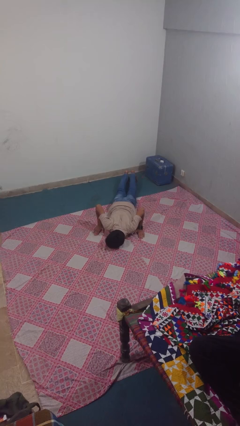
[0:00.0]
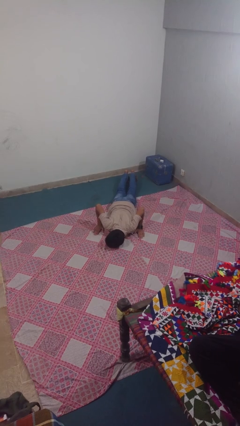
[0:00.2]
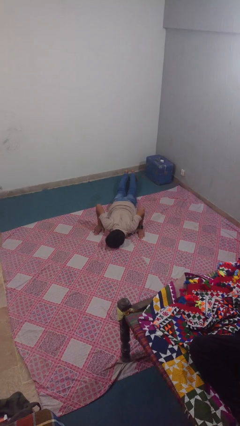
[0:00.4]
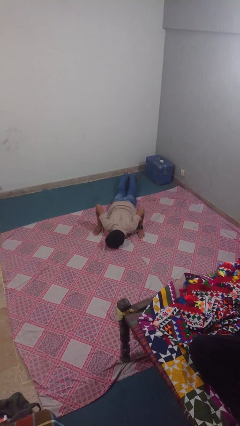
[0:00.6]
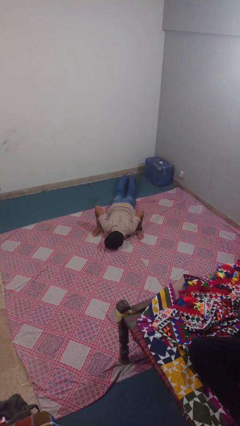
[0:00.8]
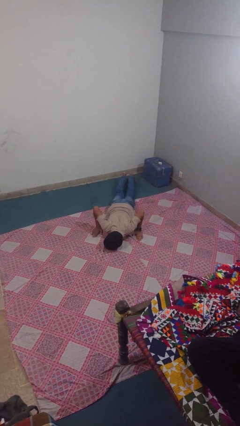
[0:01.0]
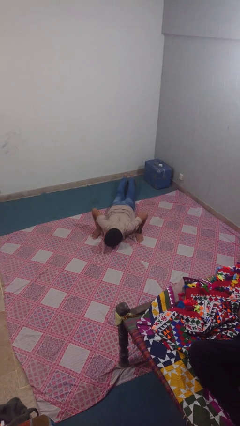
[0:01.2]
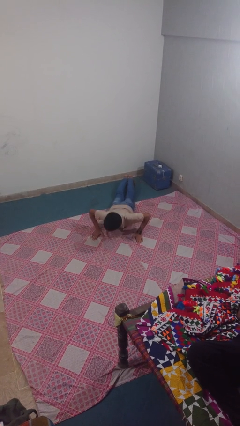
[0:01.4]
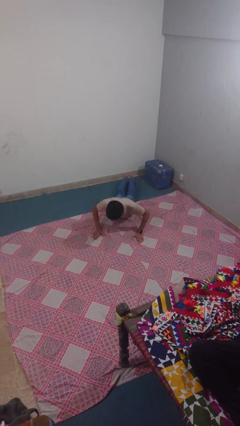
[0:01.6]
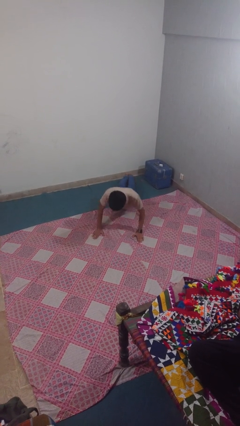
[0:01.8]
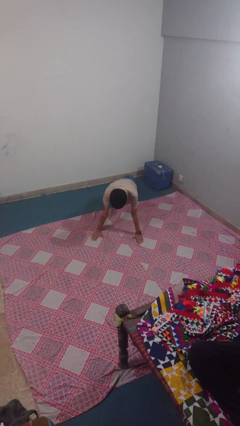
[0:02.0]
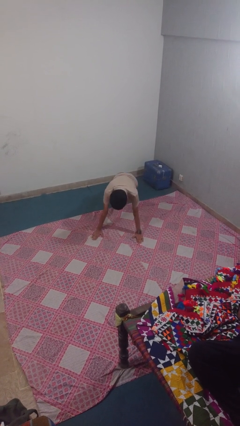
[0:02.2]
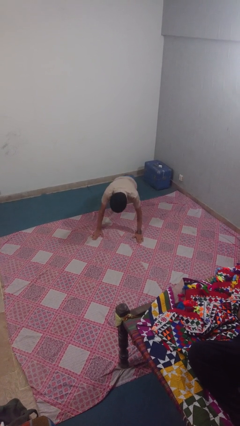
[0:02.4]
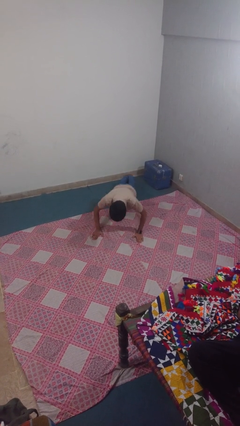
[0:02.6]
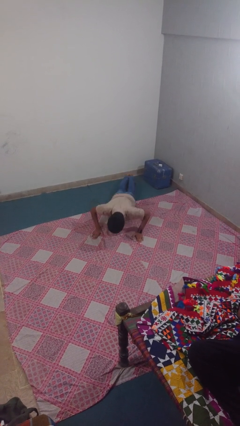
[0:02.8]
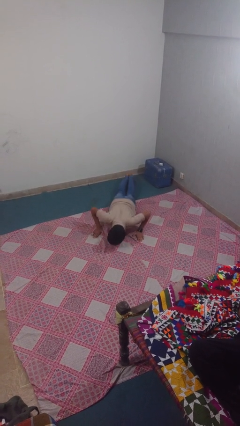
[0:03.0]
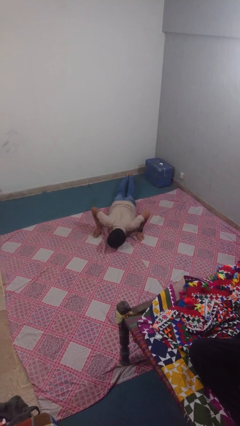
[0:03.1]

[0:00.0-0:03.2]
person exercises with pushup

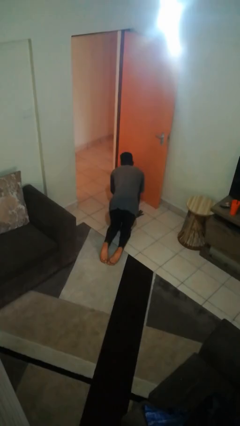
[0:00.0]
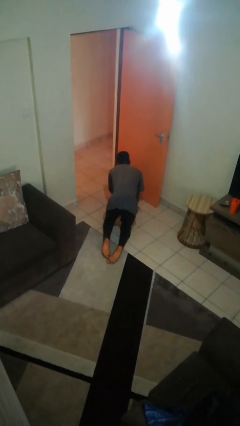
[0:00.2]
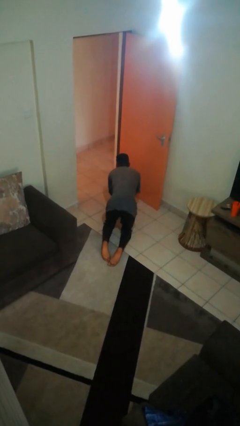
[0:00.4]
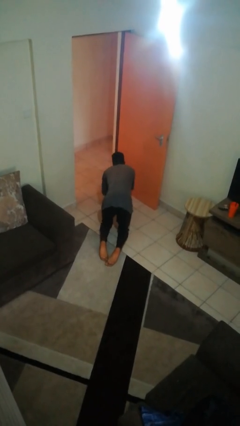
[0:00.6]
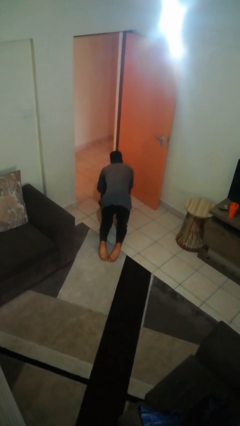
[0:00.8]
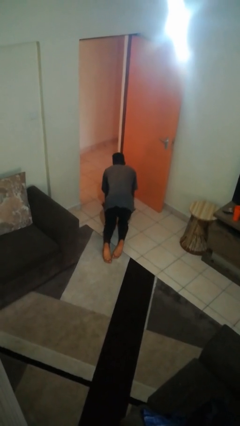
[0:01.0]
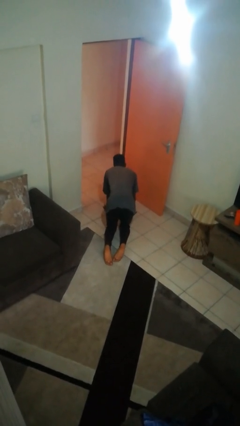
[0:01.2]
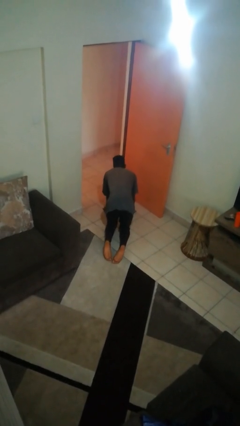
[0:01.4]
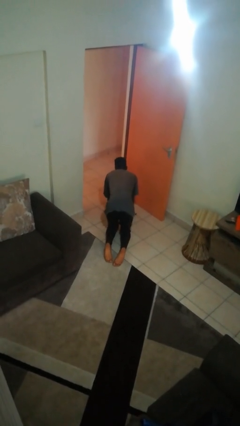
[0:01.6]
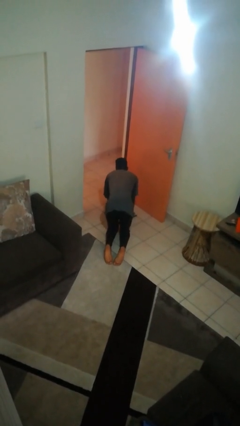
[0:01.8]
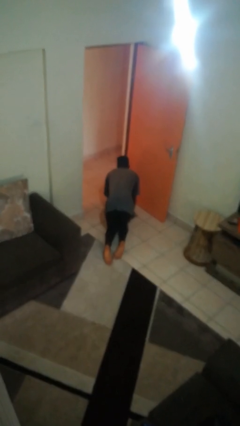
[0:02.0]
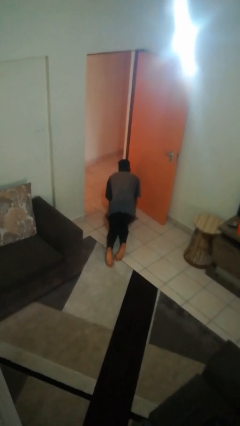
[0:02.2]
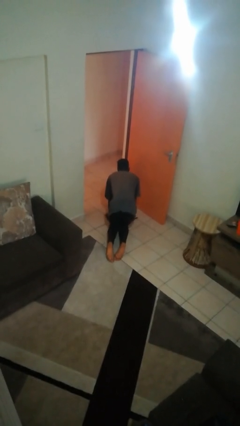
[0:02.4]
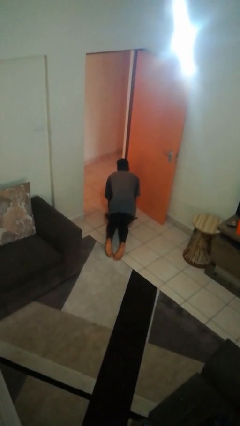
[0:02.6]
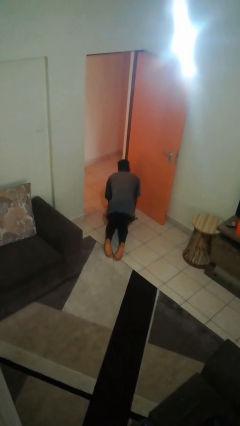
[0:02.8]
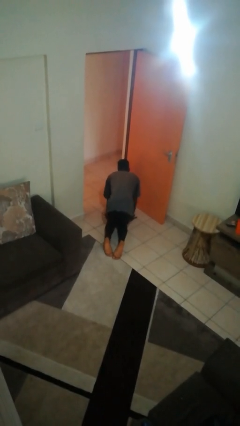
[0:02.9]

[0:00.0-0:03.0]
person crawls

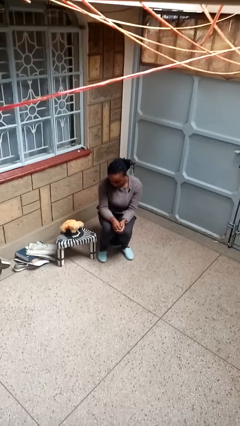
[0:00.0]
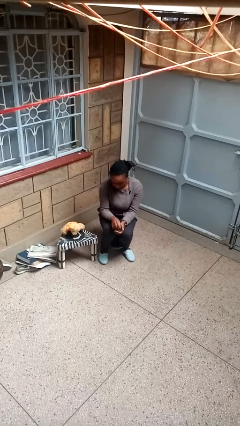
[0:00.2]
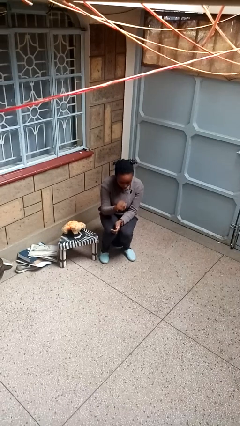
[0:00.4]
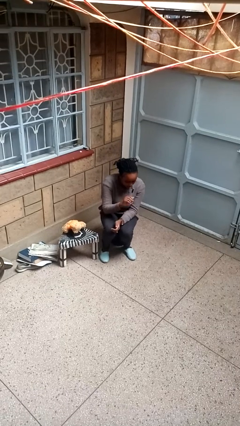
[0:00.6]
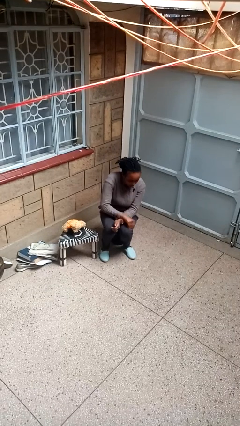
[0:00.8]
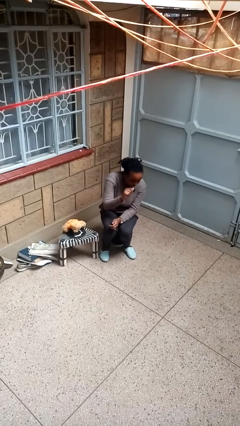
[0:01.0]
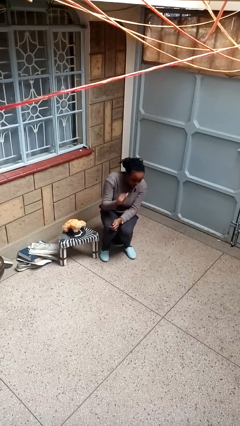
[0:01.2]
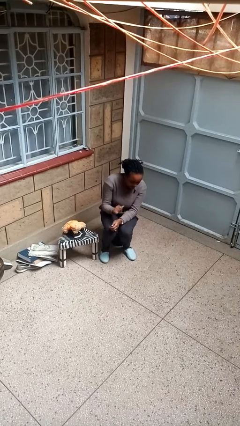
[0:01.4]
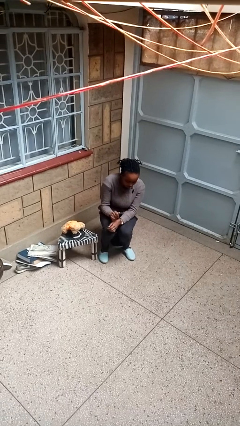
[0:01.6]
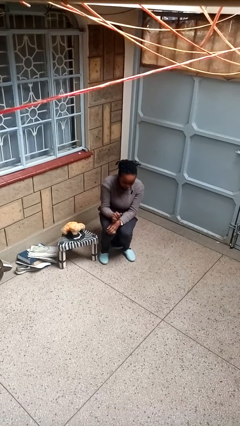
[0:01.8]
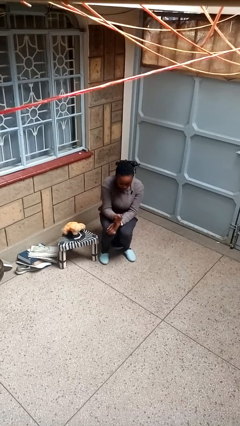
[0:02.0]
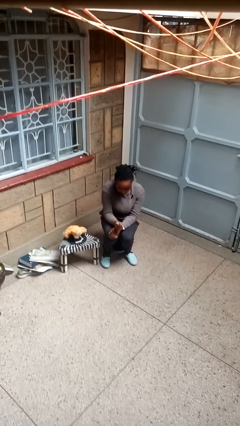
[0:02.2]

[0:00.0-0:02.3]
person swats bug

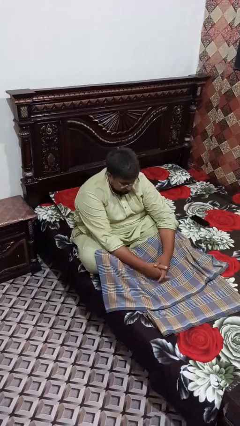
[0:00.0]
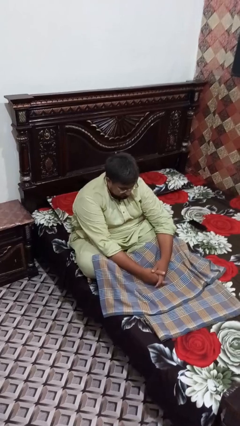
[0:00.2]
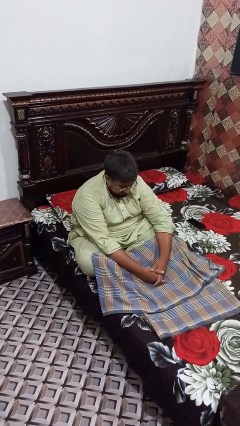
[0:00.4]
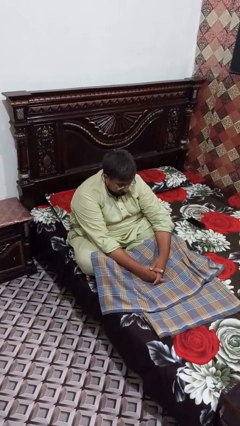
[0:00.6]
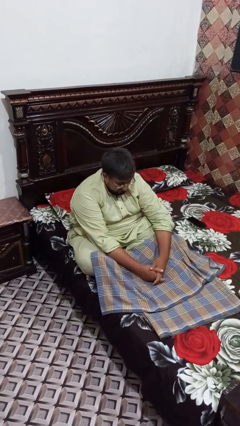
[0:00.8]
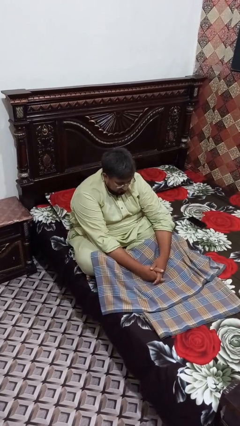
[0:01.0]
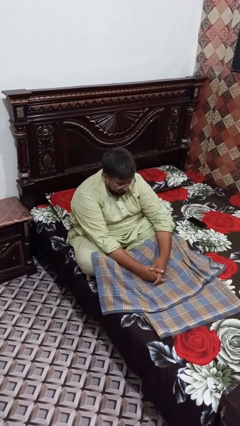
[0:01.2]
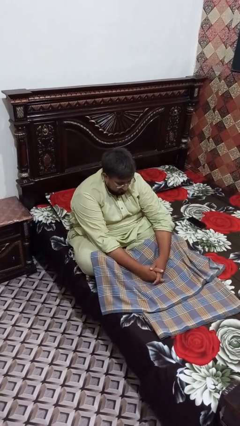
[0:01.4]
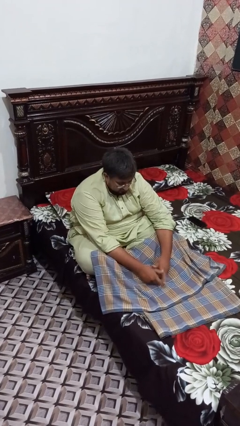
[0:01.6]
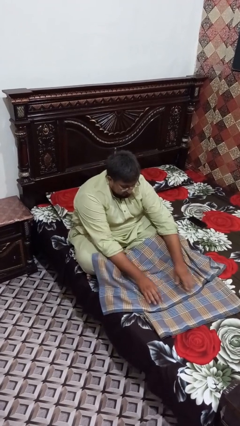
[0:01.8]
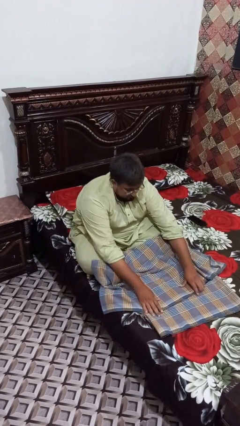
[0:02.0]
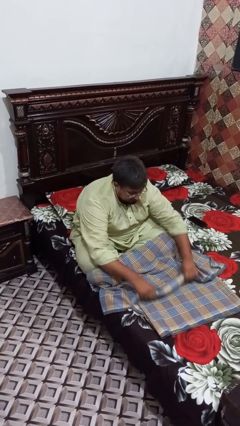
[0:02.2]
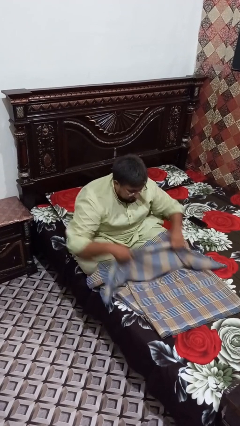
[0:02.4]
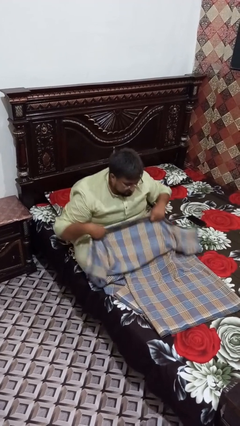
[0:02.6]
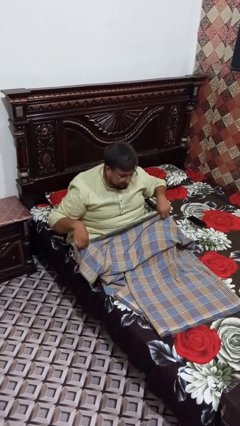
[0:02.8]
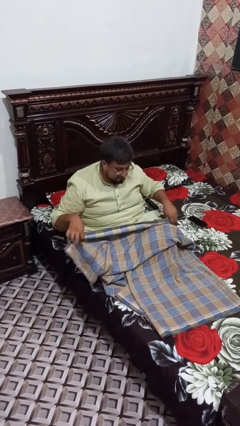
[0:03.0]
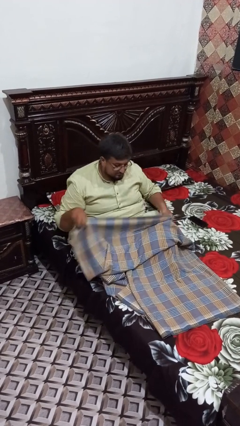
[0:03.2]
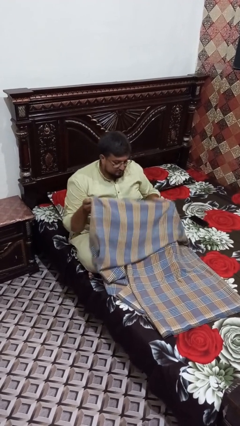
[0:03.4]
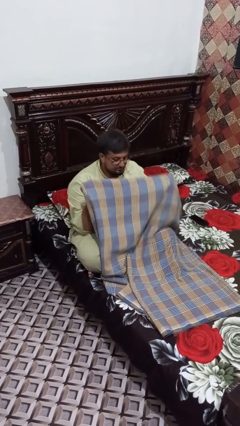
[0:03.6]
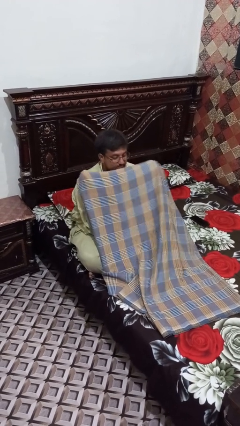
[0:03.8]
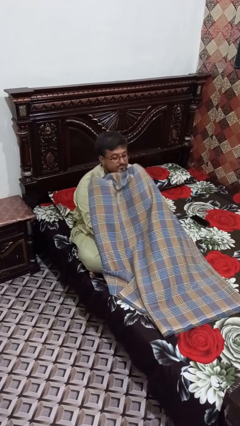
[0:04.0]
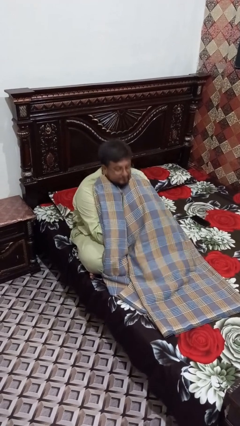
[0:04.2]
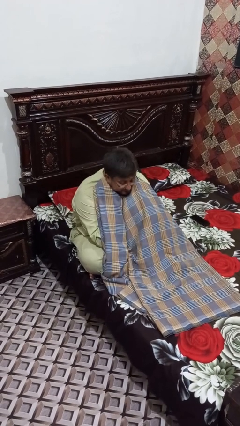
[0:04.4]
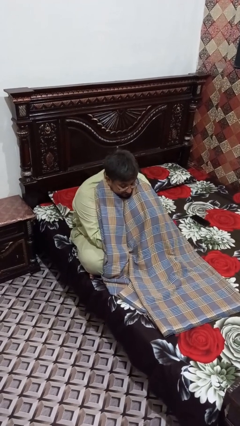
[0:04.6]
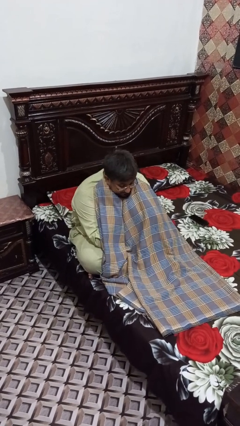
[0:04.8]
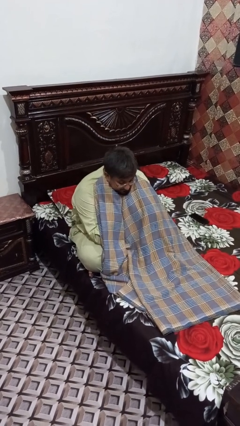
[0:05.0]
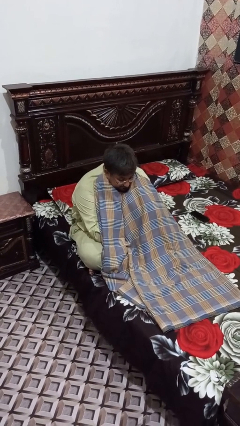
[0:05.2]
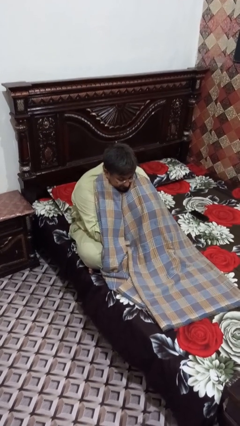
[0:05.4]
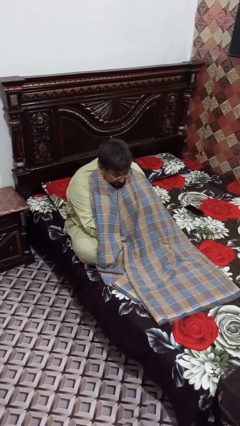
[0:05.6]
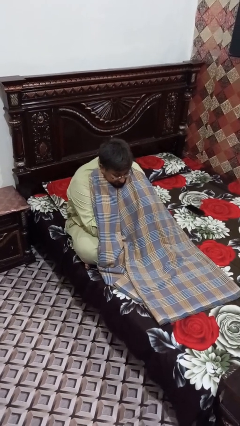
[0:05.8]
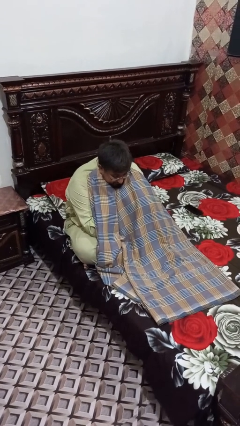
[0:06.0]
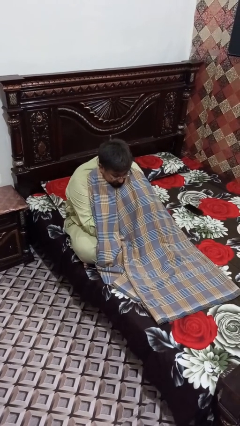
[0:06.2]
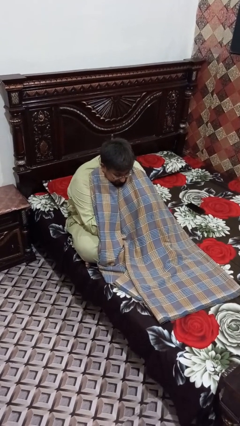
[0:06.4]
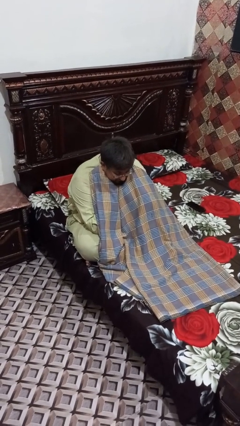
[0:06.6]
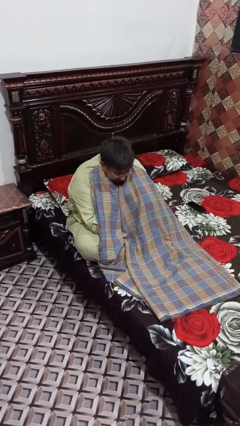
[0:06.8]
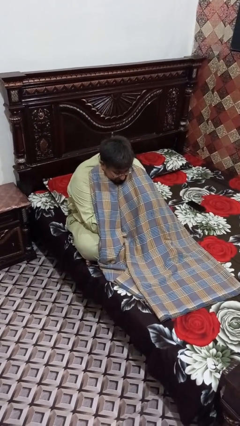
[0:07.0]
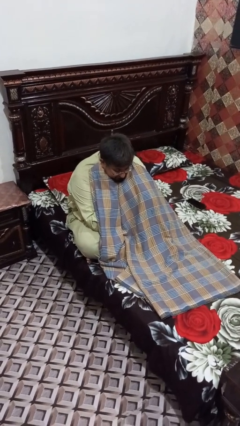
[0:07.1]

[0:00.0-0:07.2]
person covers with blanket

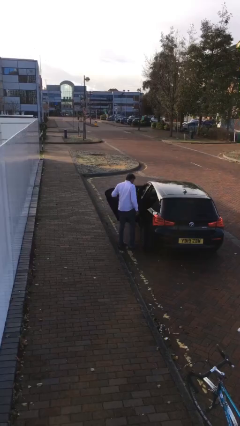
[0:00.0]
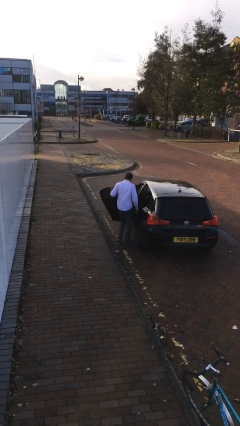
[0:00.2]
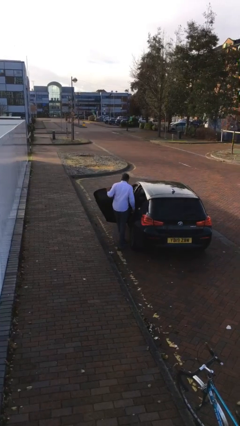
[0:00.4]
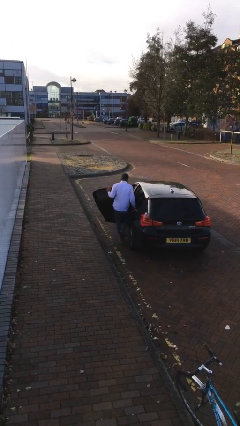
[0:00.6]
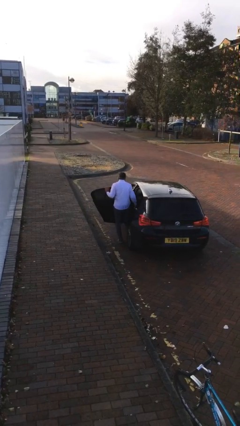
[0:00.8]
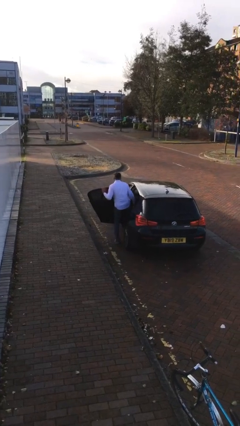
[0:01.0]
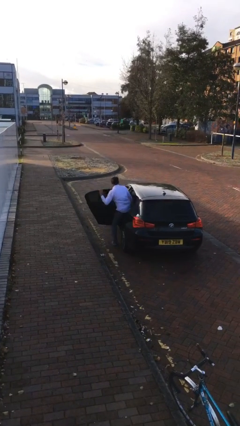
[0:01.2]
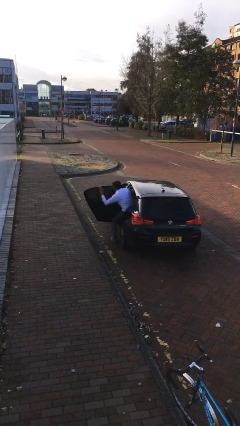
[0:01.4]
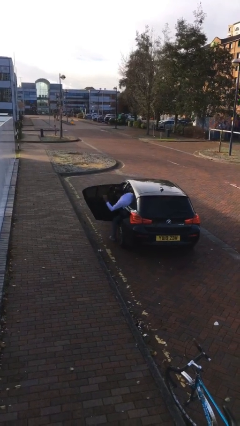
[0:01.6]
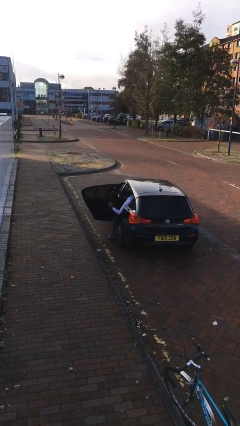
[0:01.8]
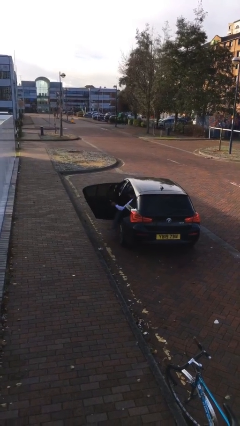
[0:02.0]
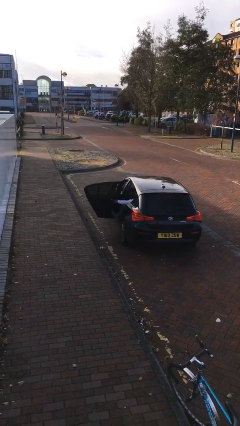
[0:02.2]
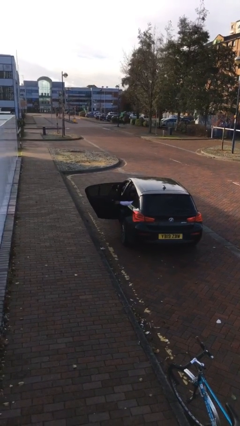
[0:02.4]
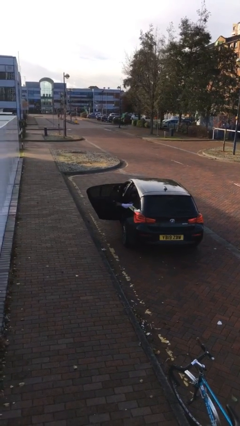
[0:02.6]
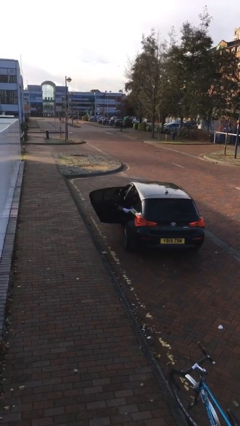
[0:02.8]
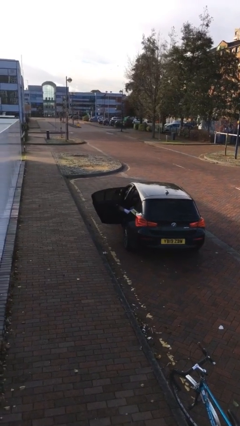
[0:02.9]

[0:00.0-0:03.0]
person enters car
